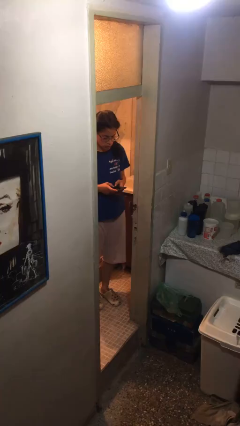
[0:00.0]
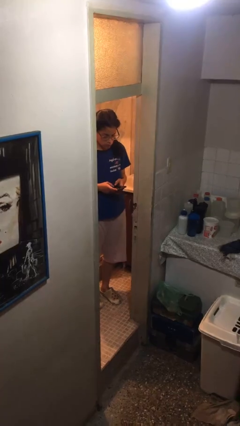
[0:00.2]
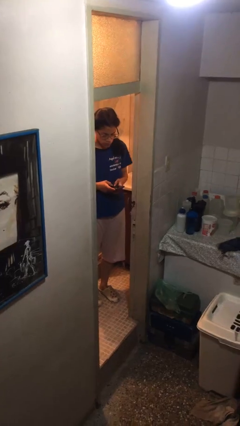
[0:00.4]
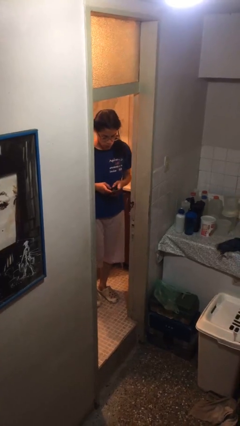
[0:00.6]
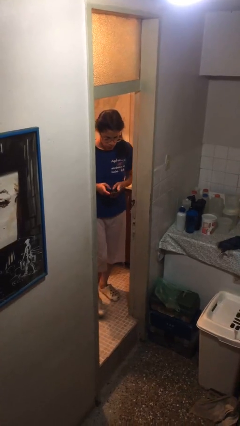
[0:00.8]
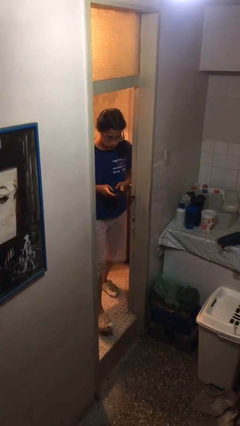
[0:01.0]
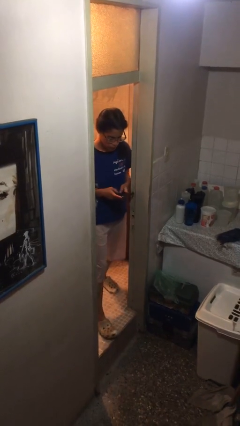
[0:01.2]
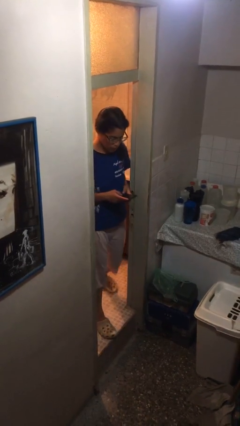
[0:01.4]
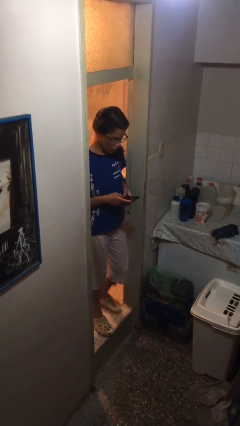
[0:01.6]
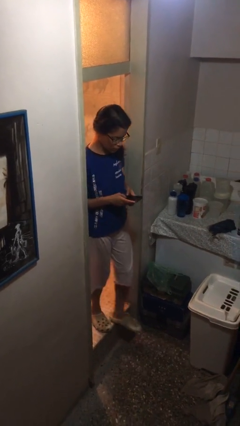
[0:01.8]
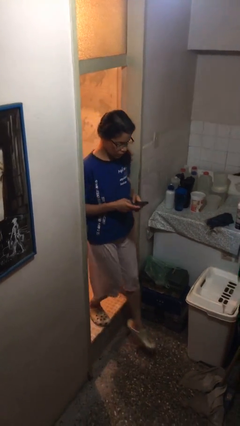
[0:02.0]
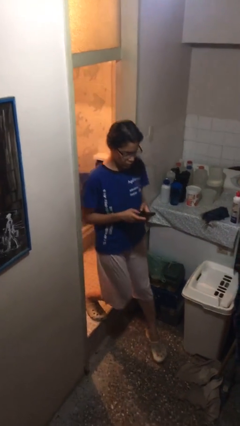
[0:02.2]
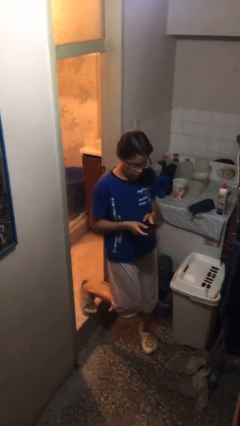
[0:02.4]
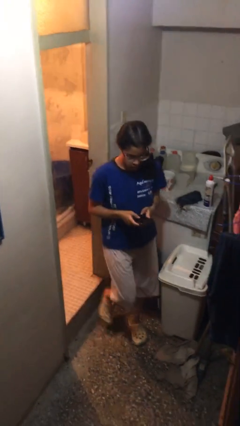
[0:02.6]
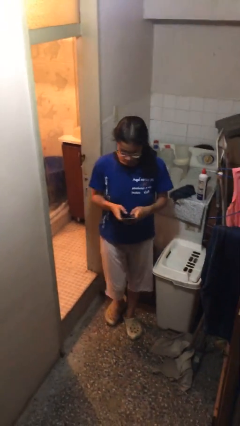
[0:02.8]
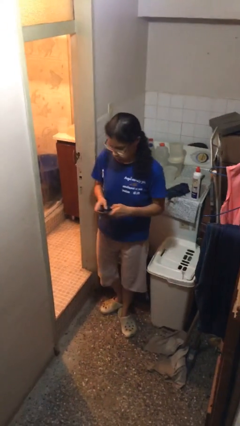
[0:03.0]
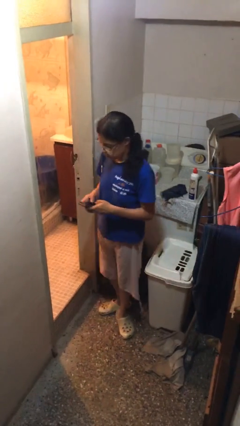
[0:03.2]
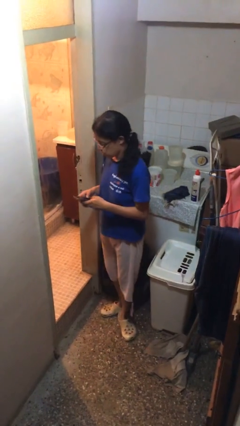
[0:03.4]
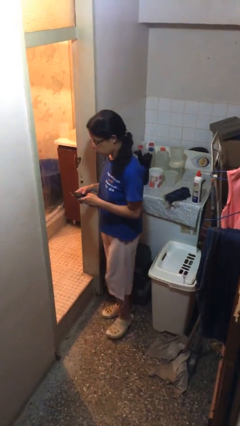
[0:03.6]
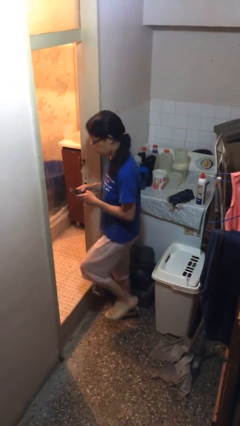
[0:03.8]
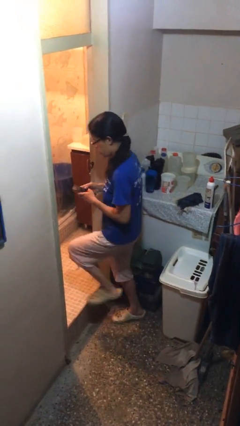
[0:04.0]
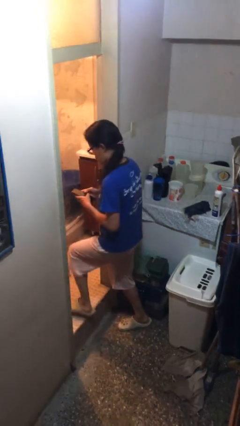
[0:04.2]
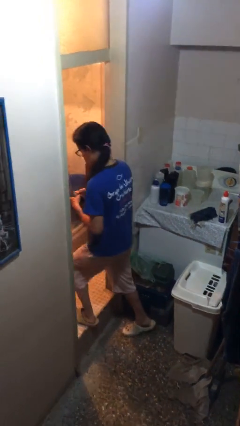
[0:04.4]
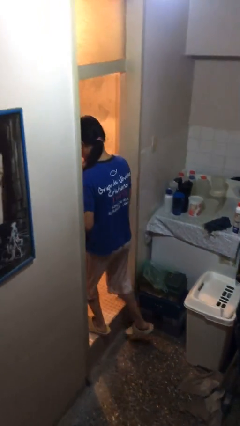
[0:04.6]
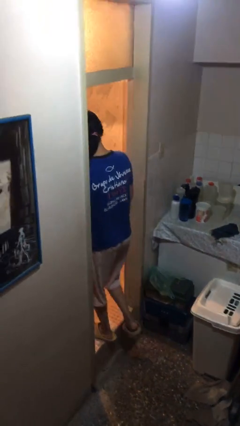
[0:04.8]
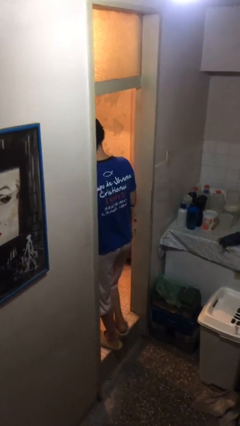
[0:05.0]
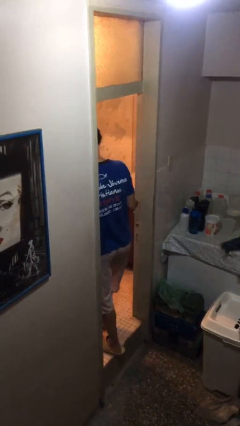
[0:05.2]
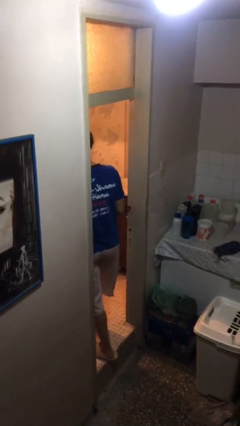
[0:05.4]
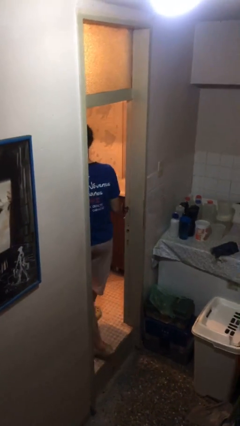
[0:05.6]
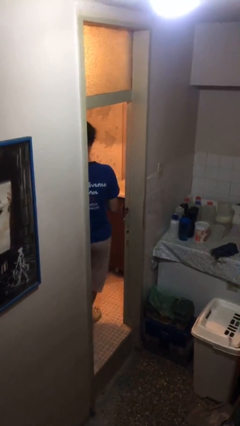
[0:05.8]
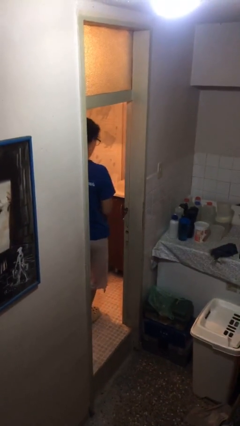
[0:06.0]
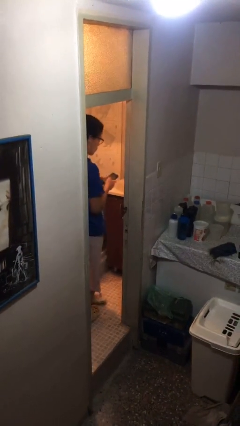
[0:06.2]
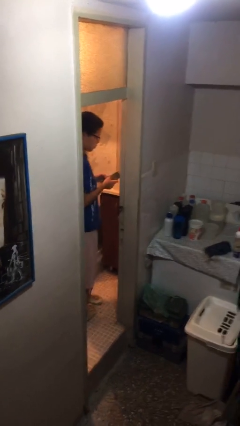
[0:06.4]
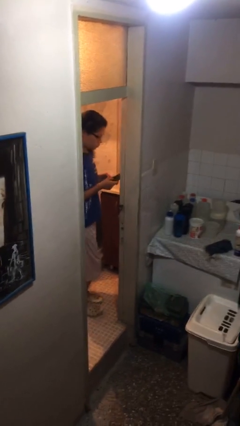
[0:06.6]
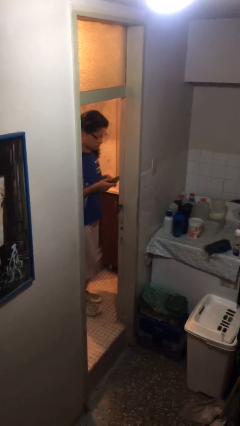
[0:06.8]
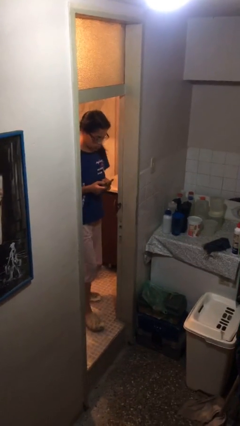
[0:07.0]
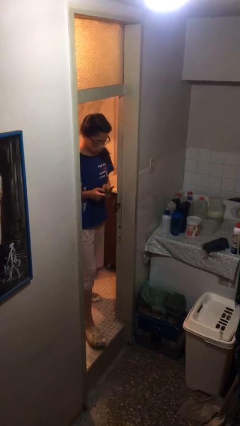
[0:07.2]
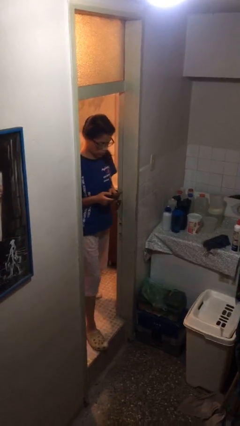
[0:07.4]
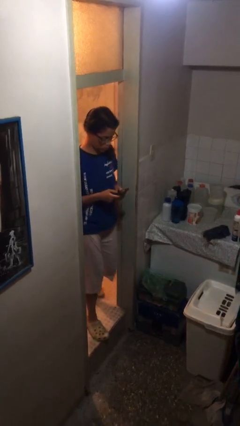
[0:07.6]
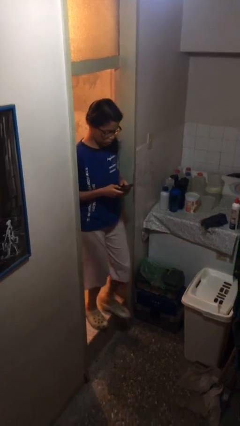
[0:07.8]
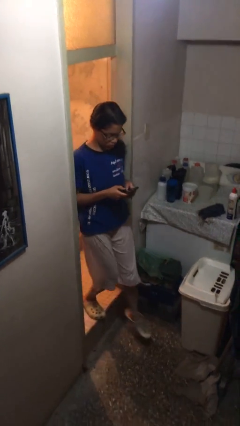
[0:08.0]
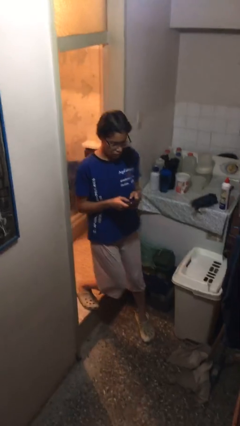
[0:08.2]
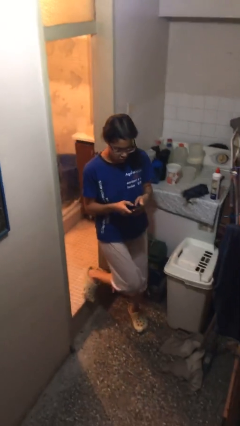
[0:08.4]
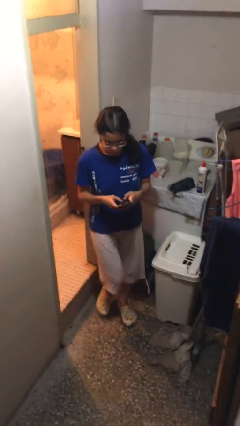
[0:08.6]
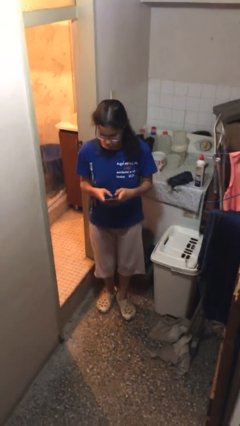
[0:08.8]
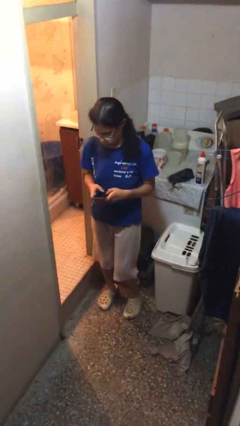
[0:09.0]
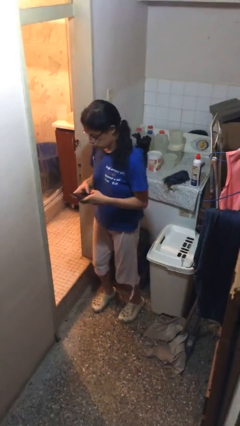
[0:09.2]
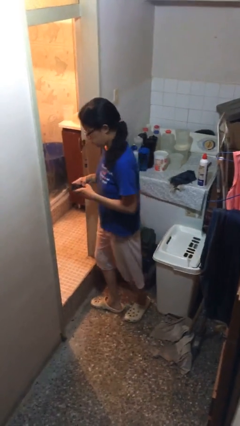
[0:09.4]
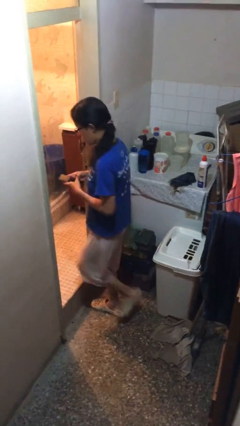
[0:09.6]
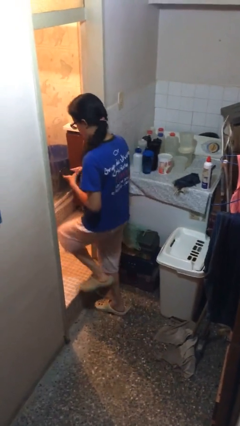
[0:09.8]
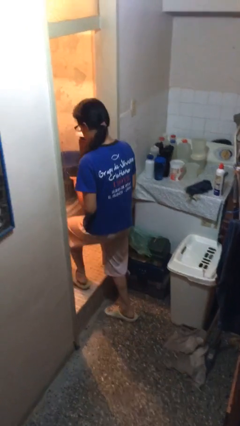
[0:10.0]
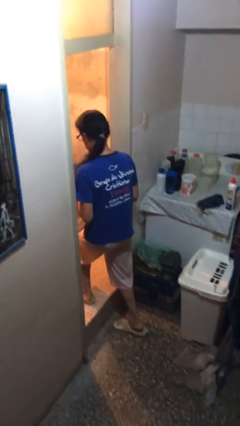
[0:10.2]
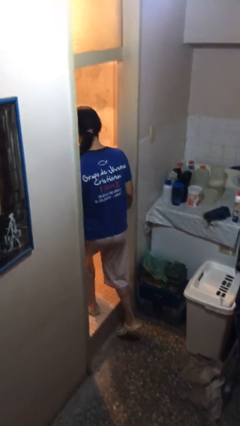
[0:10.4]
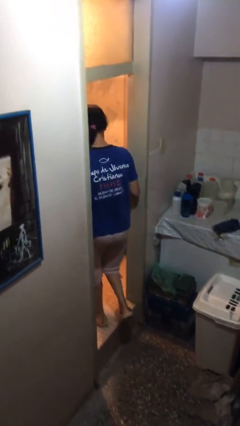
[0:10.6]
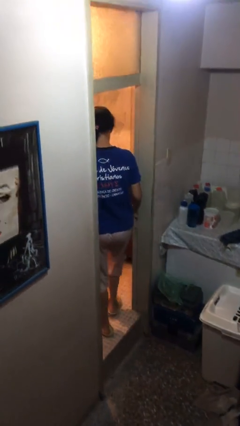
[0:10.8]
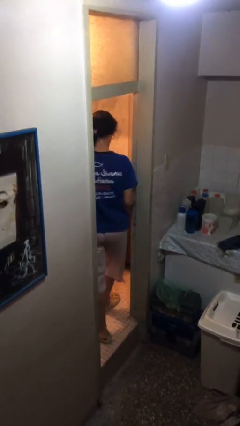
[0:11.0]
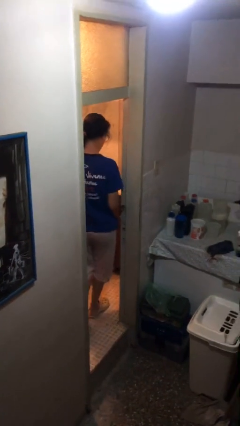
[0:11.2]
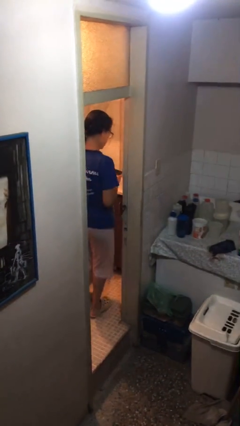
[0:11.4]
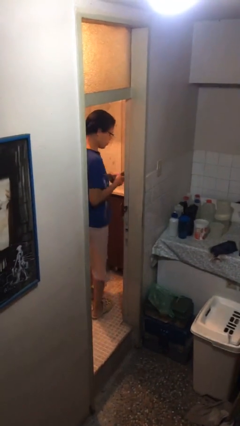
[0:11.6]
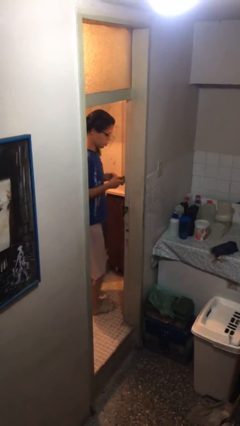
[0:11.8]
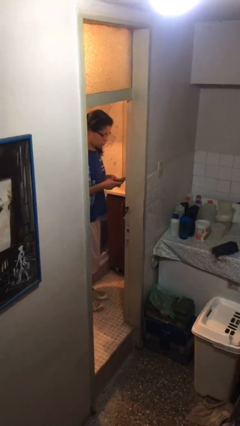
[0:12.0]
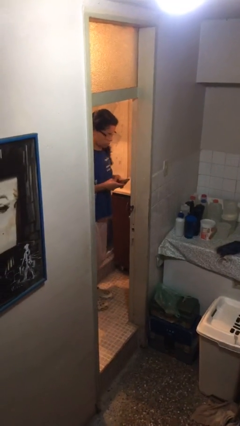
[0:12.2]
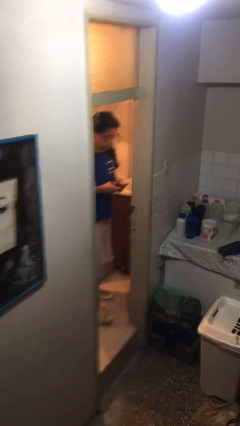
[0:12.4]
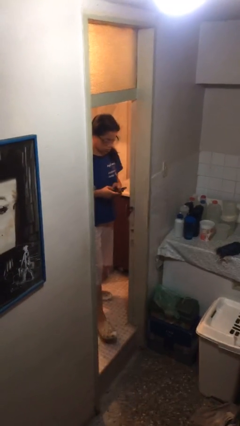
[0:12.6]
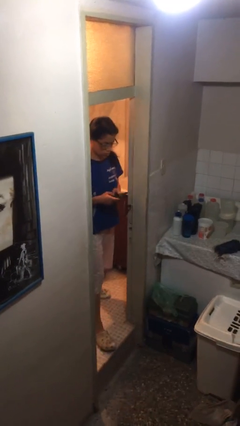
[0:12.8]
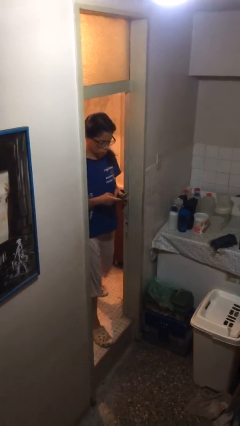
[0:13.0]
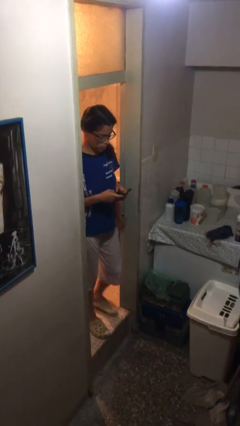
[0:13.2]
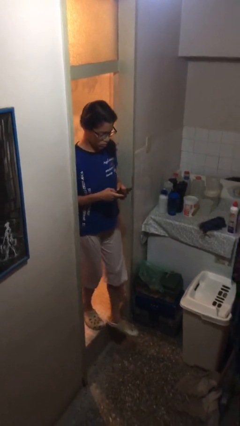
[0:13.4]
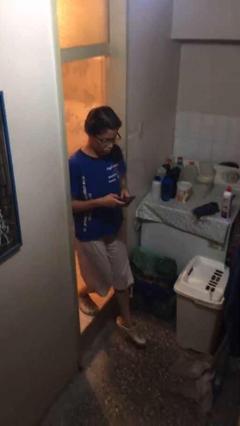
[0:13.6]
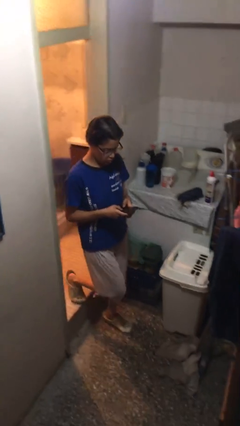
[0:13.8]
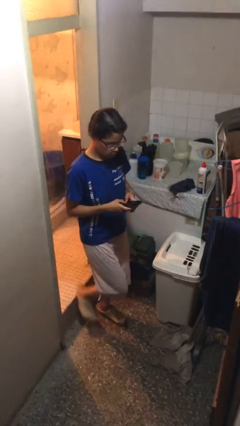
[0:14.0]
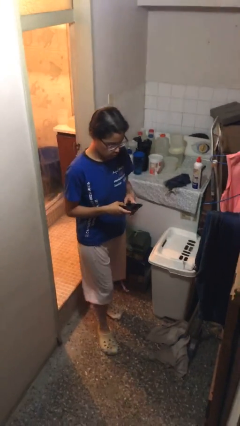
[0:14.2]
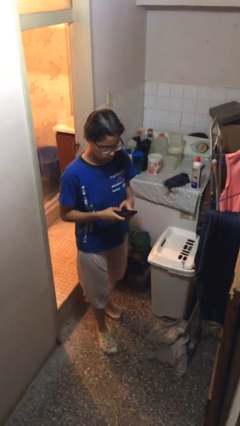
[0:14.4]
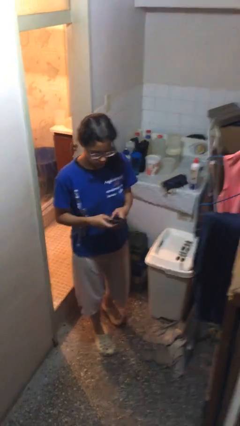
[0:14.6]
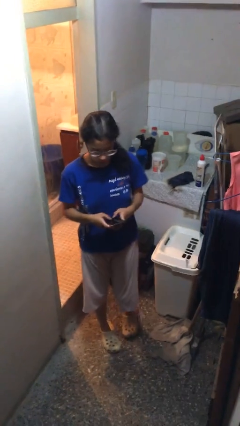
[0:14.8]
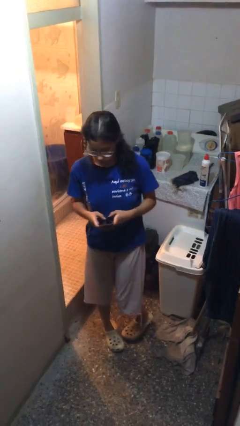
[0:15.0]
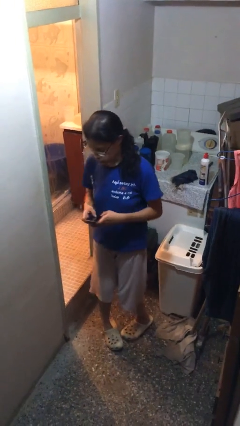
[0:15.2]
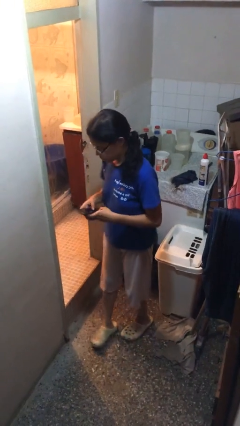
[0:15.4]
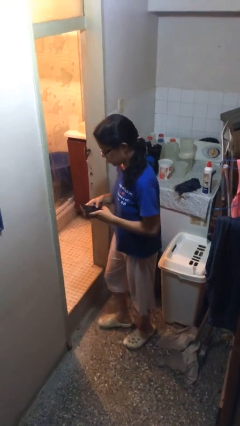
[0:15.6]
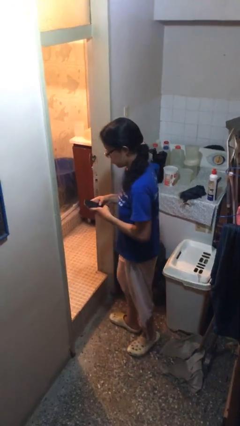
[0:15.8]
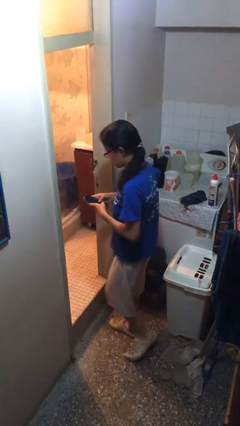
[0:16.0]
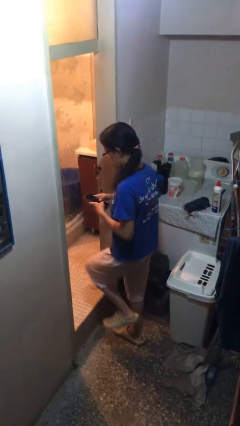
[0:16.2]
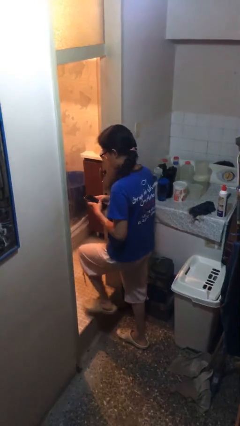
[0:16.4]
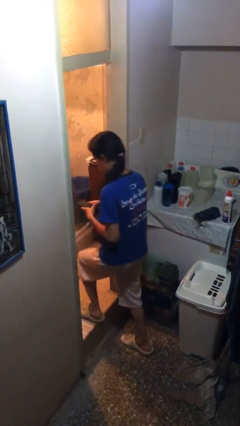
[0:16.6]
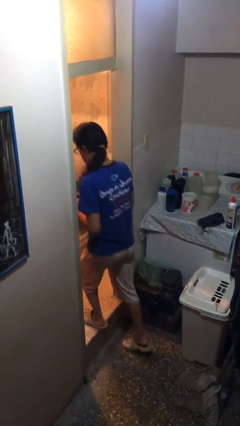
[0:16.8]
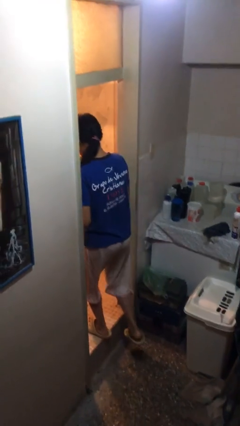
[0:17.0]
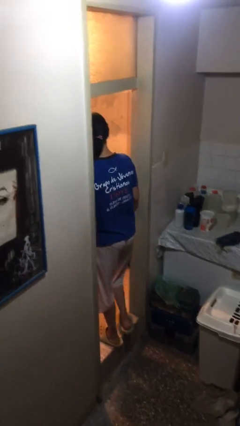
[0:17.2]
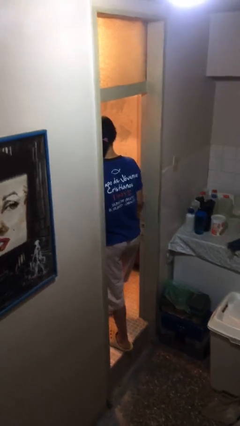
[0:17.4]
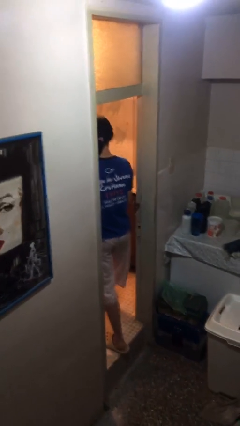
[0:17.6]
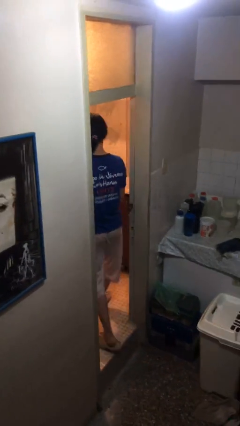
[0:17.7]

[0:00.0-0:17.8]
person texts on phone

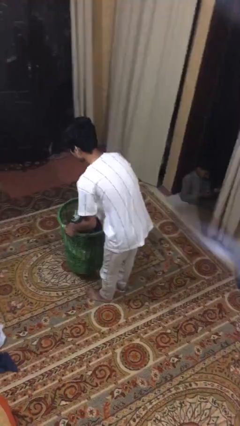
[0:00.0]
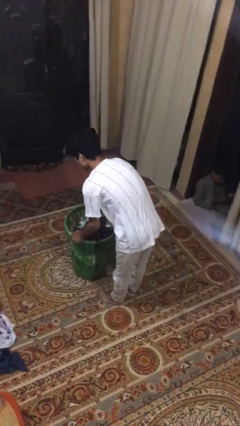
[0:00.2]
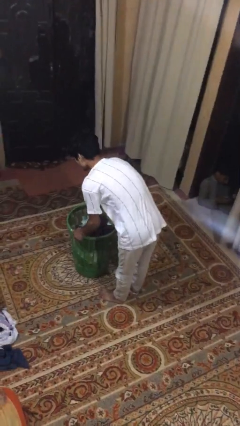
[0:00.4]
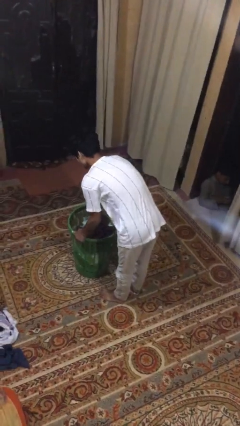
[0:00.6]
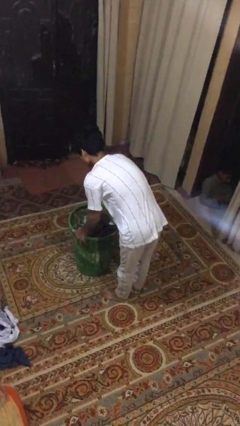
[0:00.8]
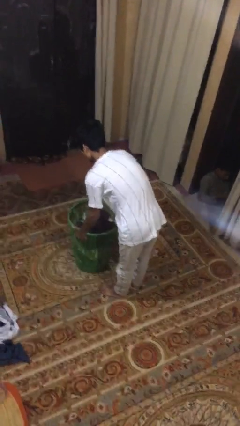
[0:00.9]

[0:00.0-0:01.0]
person puts down object on floor
